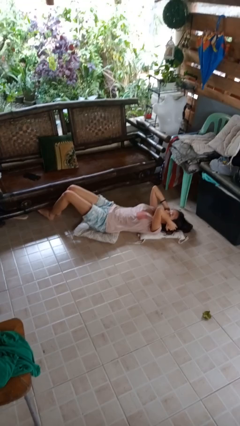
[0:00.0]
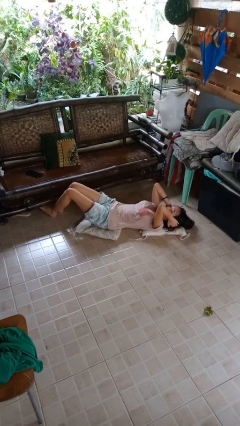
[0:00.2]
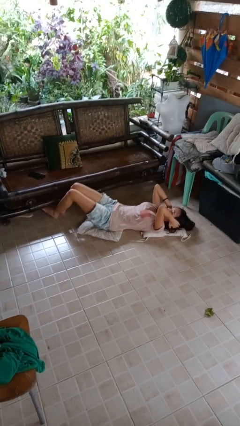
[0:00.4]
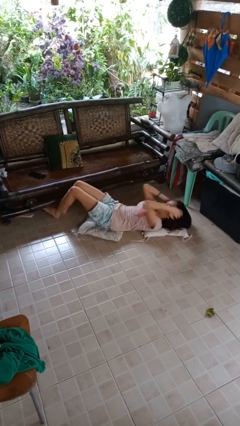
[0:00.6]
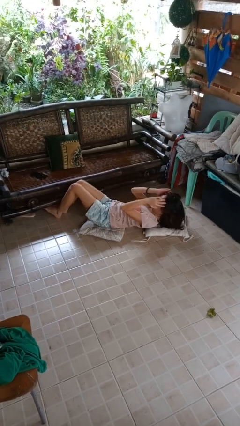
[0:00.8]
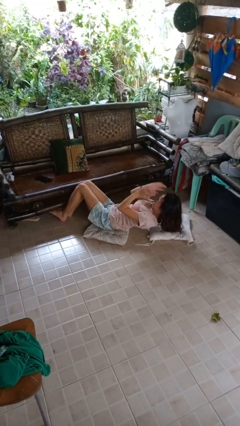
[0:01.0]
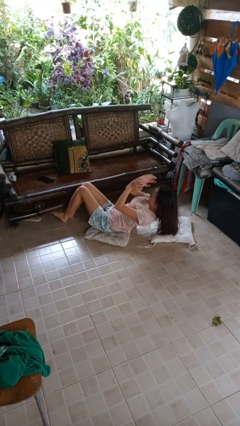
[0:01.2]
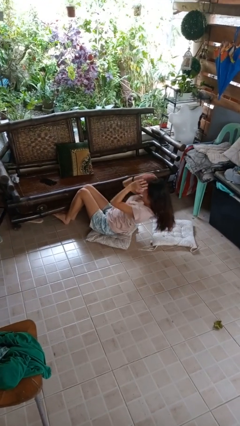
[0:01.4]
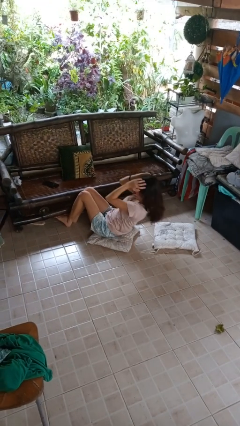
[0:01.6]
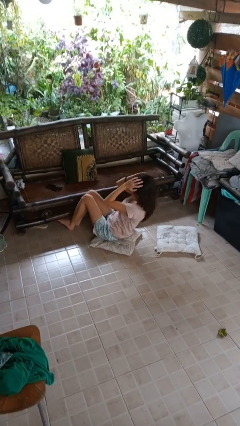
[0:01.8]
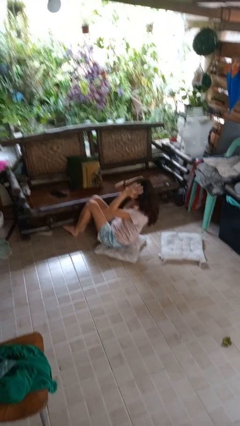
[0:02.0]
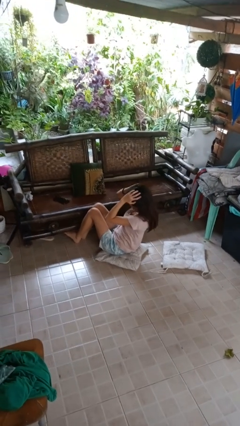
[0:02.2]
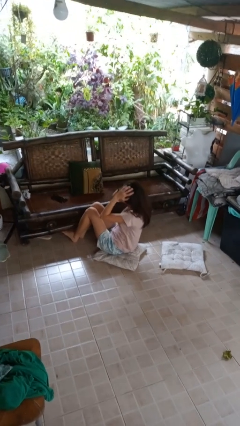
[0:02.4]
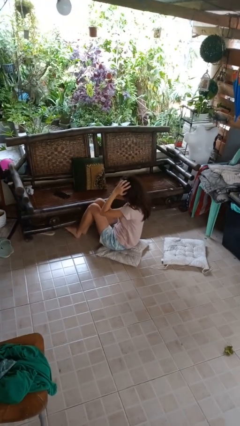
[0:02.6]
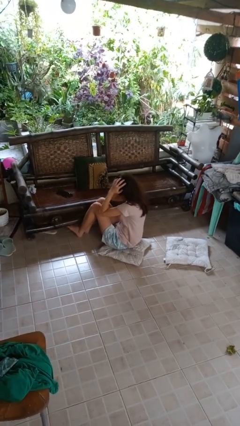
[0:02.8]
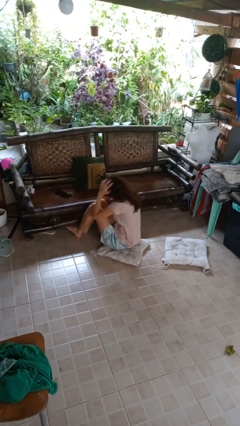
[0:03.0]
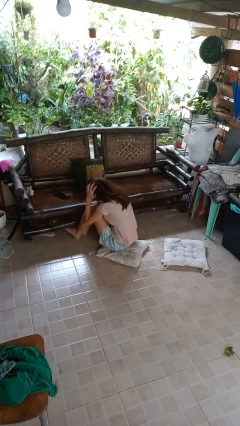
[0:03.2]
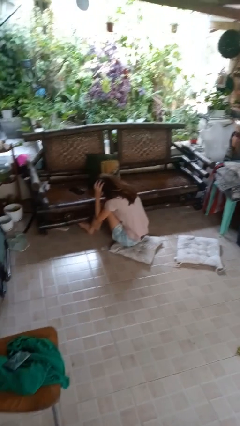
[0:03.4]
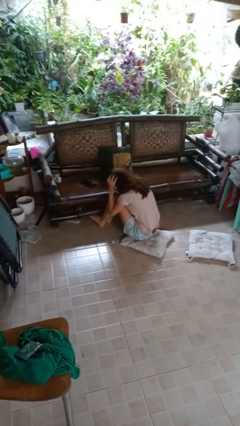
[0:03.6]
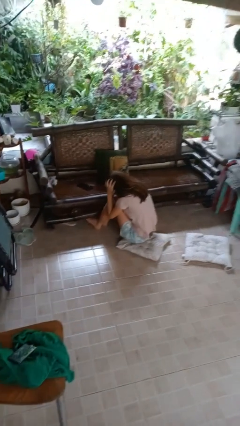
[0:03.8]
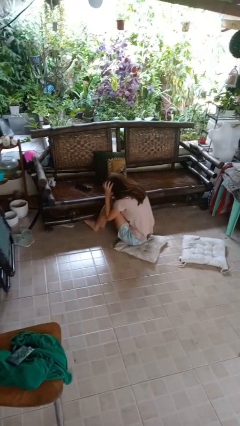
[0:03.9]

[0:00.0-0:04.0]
person exercises with situp

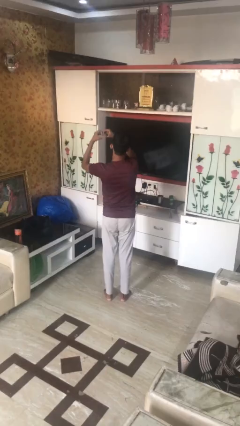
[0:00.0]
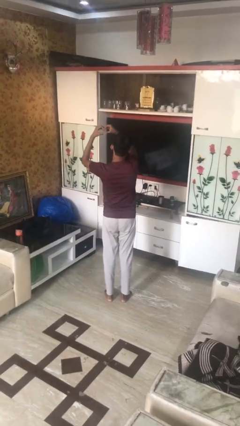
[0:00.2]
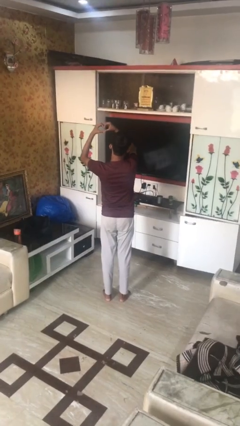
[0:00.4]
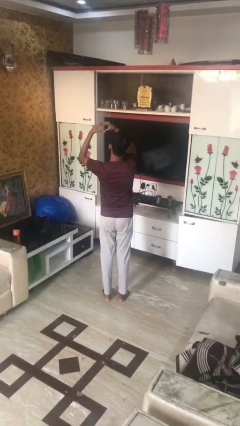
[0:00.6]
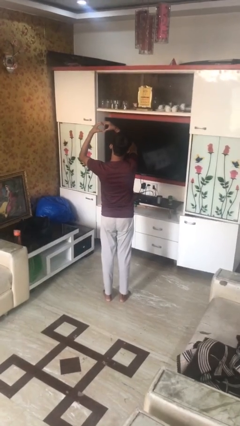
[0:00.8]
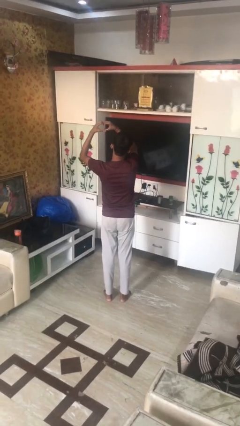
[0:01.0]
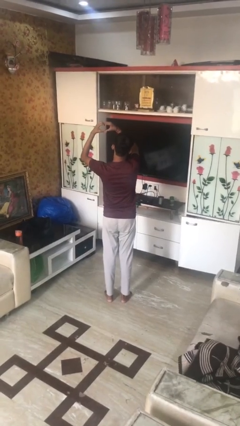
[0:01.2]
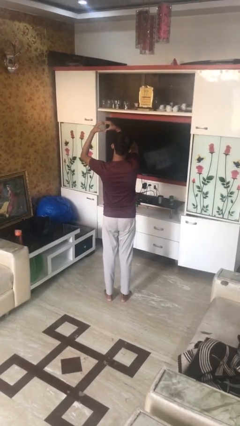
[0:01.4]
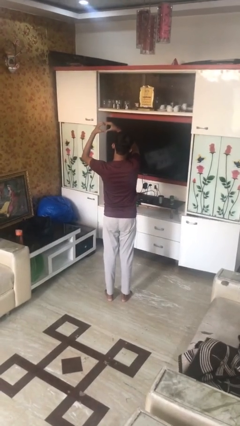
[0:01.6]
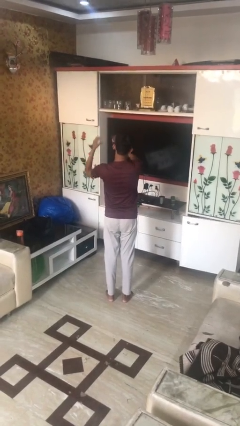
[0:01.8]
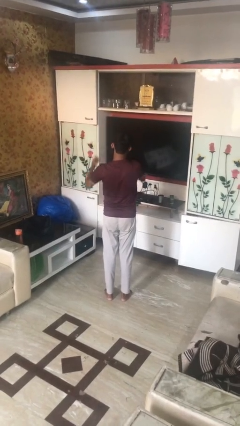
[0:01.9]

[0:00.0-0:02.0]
person gestures heart

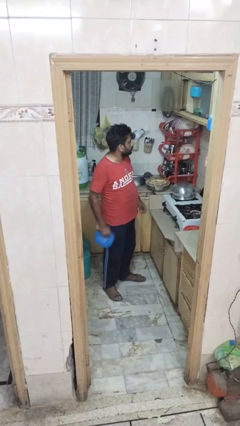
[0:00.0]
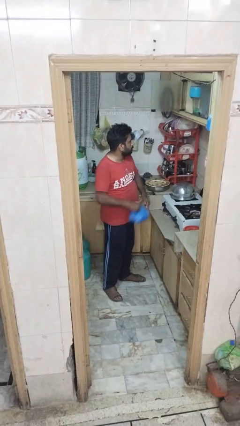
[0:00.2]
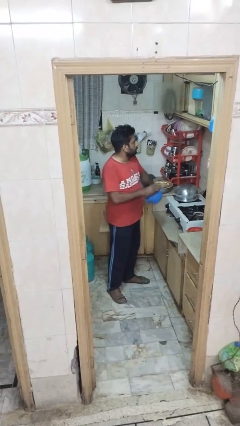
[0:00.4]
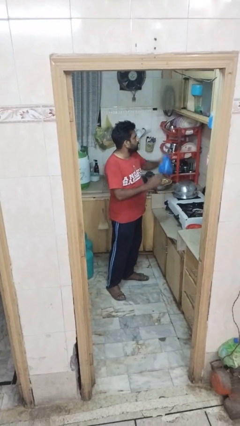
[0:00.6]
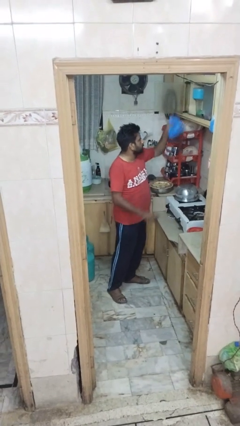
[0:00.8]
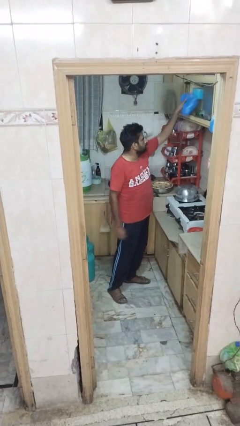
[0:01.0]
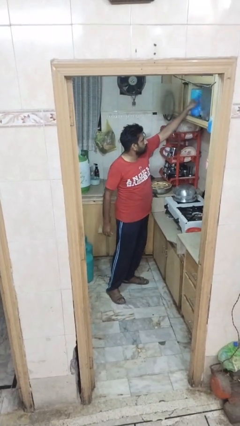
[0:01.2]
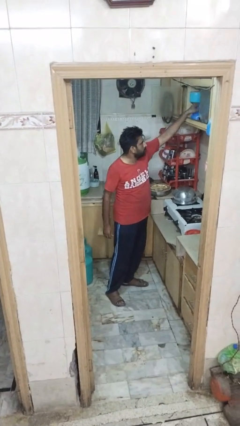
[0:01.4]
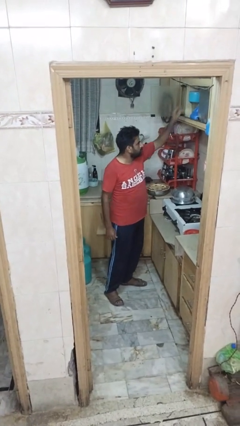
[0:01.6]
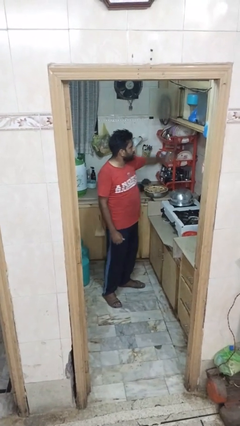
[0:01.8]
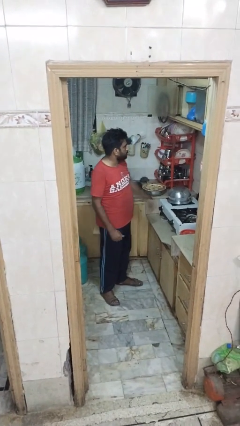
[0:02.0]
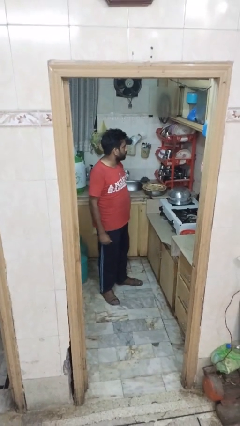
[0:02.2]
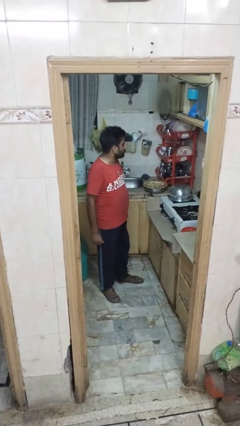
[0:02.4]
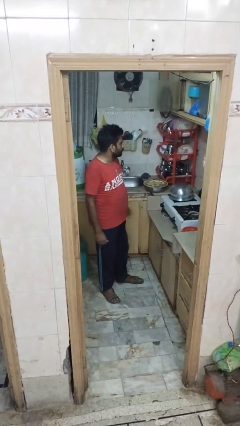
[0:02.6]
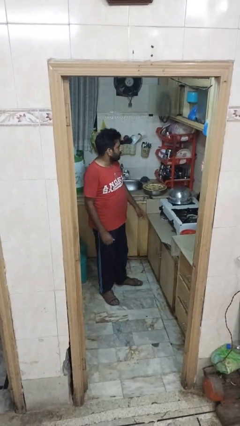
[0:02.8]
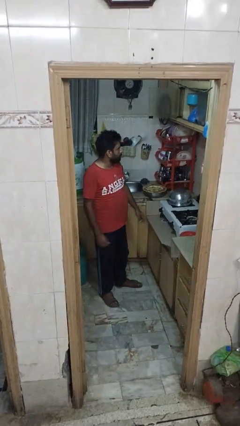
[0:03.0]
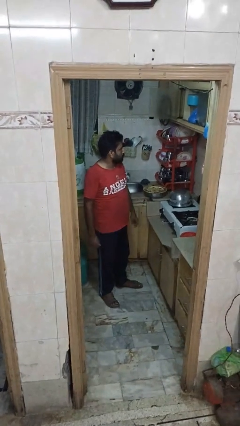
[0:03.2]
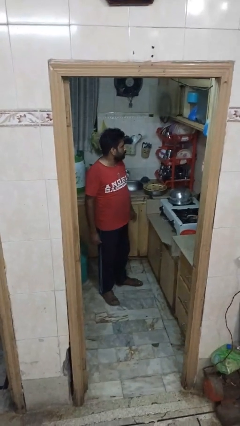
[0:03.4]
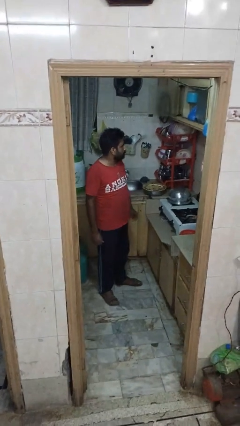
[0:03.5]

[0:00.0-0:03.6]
person loads groceries into cabinet

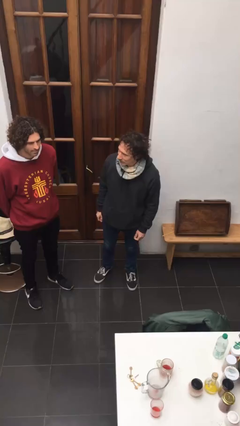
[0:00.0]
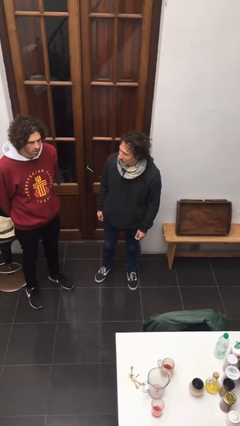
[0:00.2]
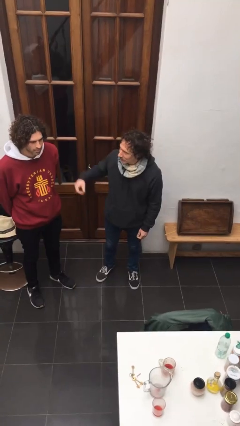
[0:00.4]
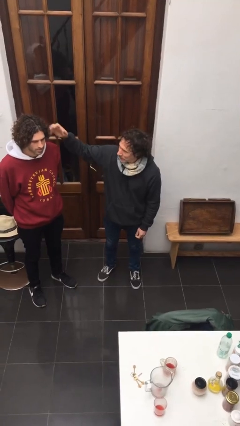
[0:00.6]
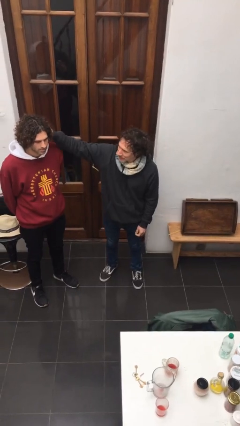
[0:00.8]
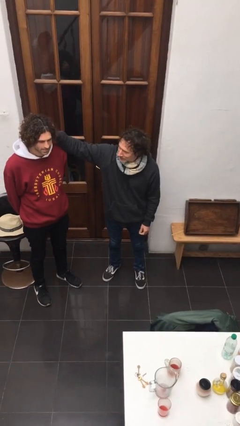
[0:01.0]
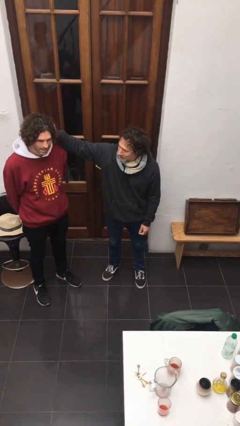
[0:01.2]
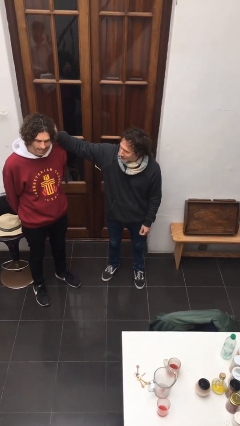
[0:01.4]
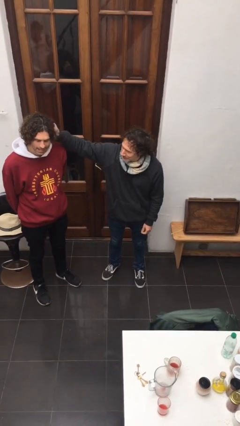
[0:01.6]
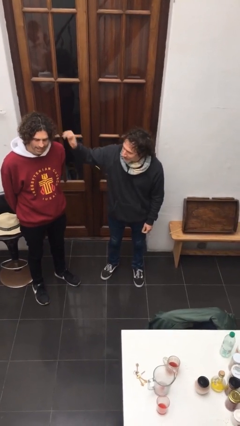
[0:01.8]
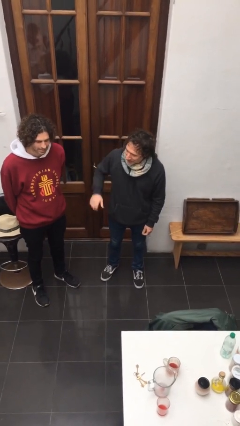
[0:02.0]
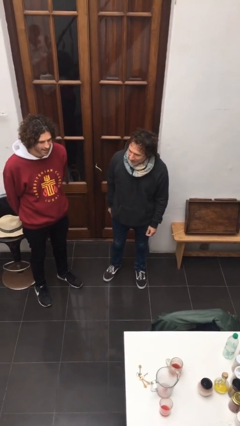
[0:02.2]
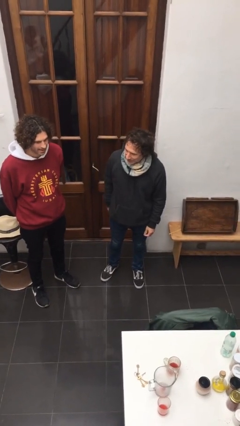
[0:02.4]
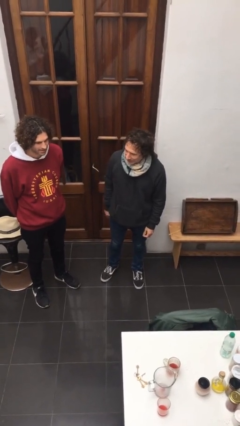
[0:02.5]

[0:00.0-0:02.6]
person grabs person by hair

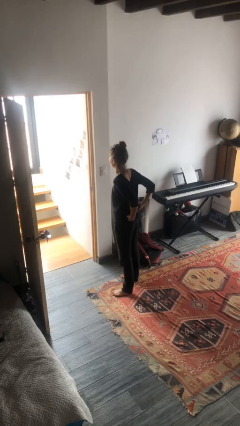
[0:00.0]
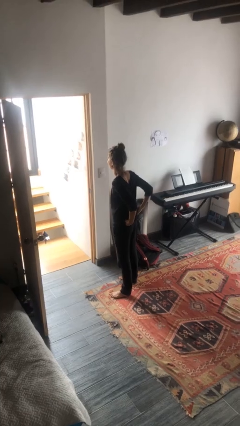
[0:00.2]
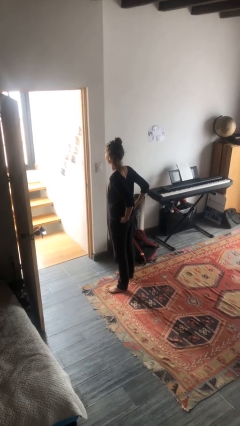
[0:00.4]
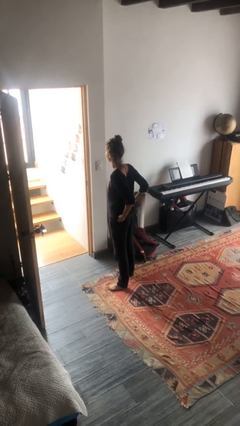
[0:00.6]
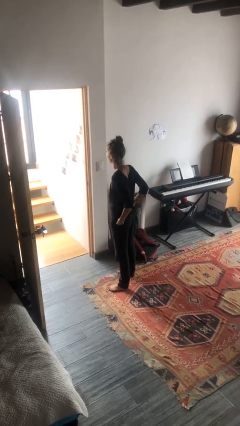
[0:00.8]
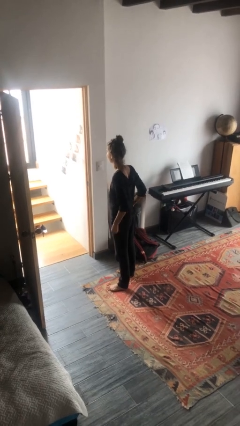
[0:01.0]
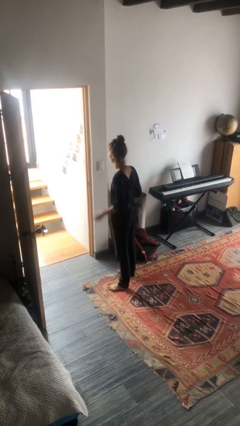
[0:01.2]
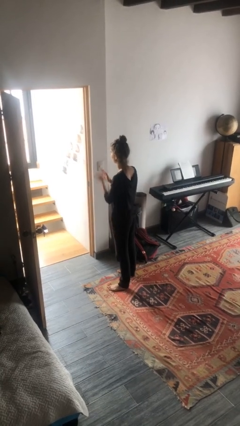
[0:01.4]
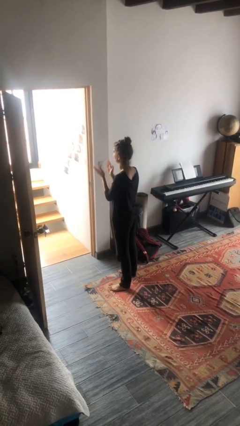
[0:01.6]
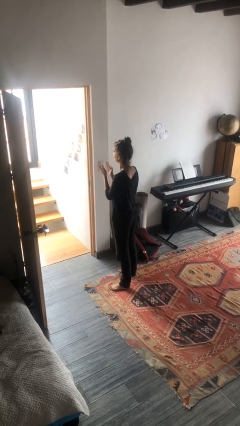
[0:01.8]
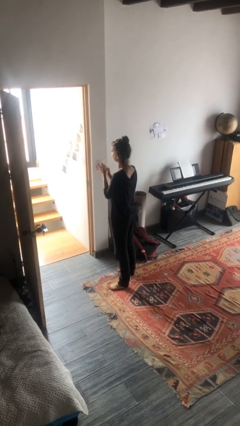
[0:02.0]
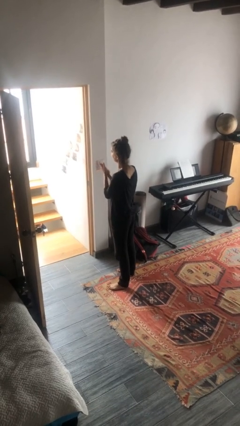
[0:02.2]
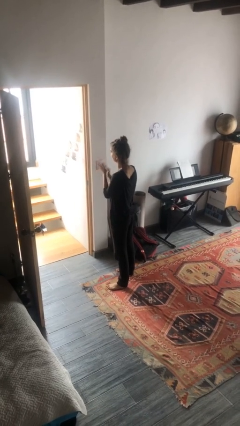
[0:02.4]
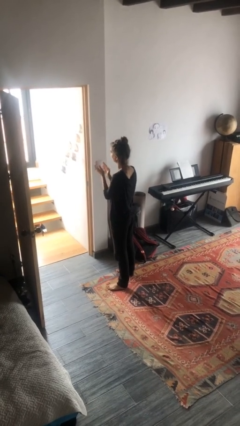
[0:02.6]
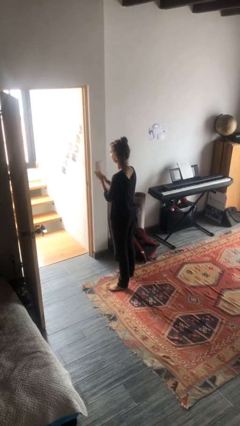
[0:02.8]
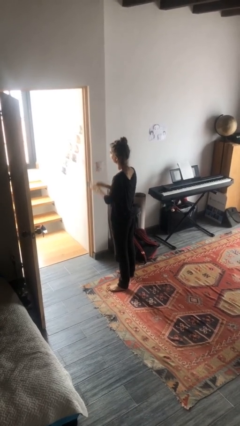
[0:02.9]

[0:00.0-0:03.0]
person claps hands

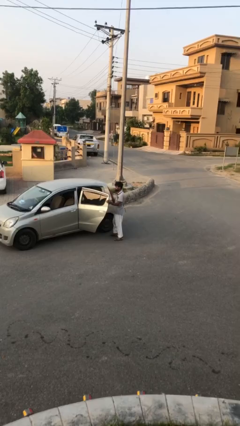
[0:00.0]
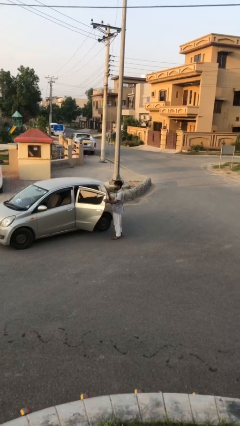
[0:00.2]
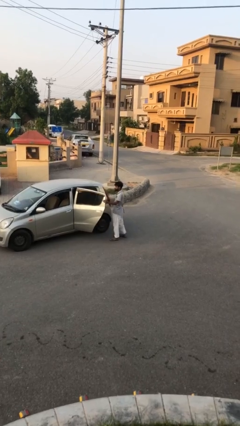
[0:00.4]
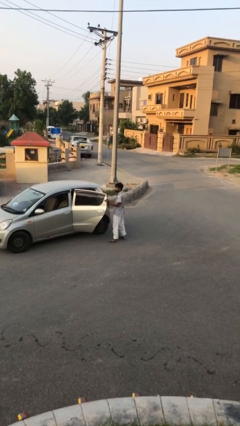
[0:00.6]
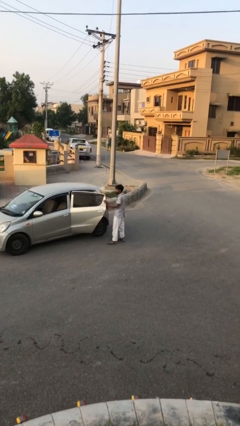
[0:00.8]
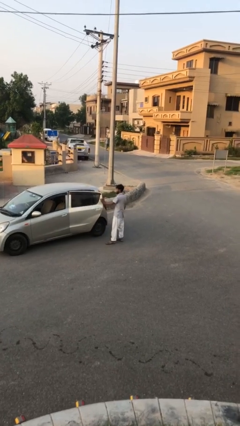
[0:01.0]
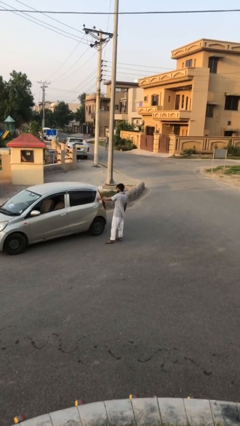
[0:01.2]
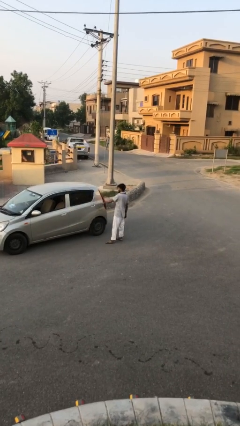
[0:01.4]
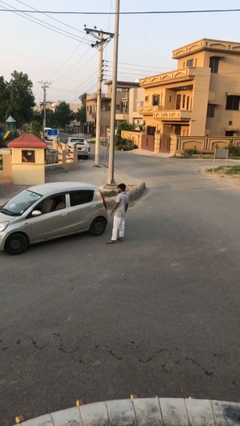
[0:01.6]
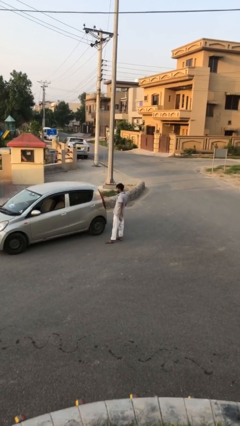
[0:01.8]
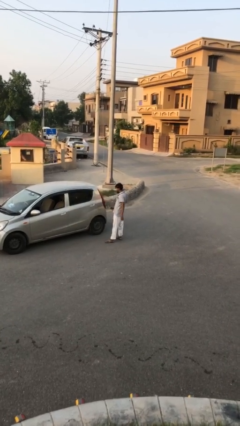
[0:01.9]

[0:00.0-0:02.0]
person closes car door
